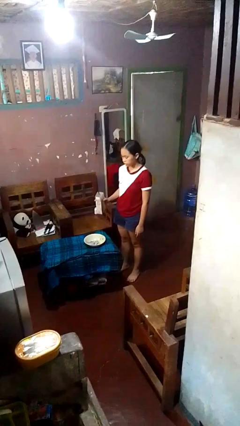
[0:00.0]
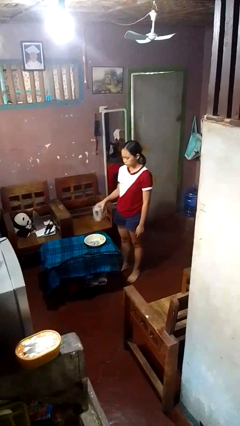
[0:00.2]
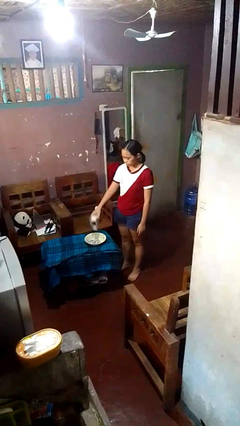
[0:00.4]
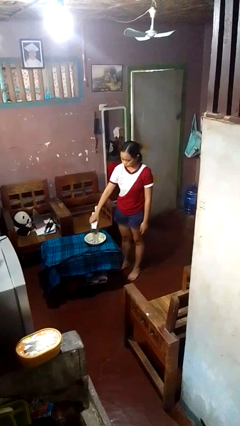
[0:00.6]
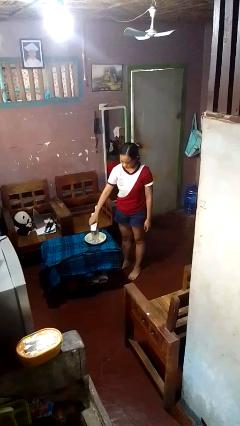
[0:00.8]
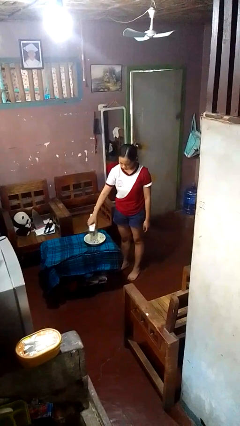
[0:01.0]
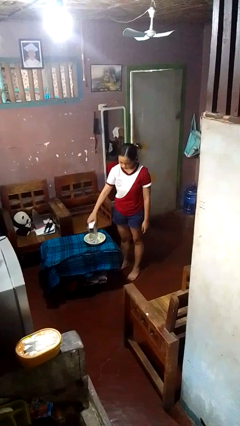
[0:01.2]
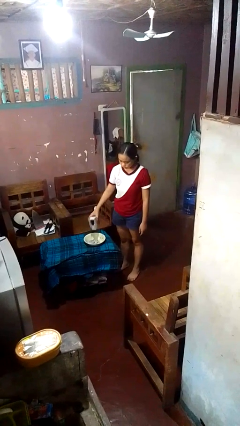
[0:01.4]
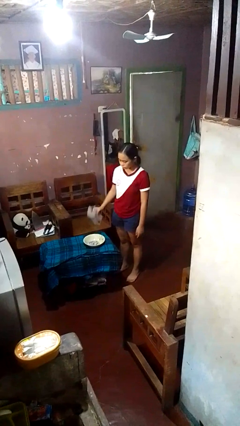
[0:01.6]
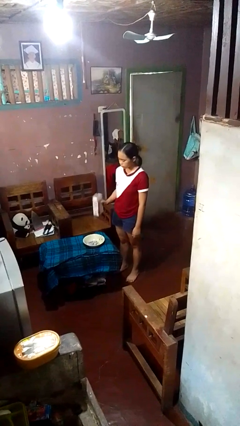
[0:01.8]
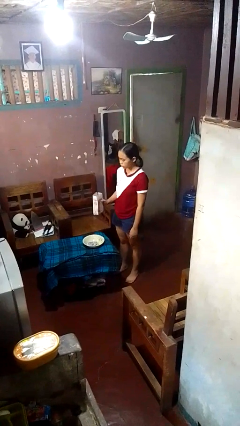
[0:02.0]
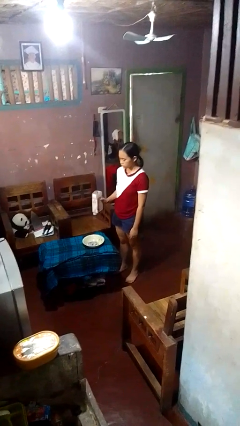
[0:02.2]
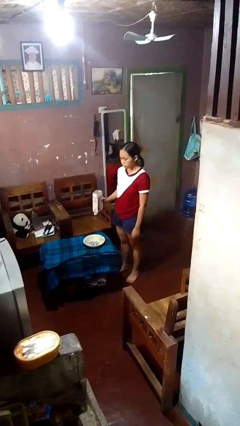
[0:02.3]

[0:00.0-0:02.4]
person pours into bowl

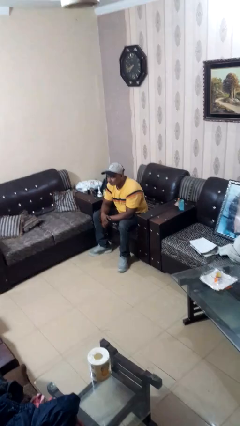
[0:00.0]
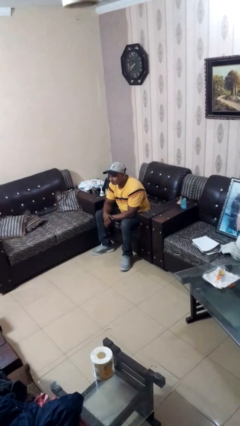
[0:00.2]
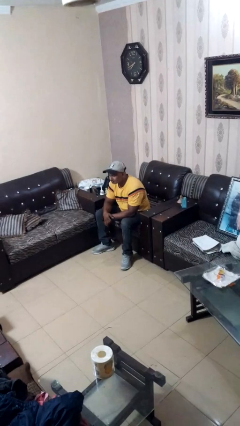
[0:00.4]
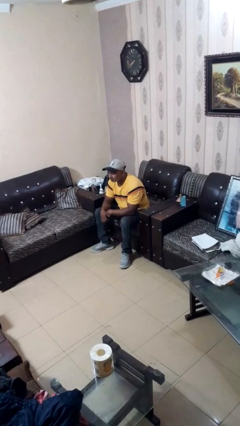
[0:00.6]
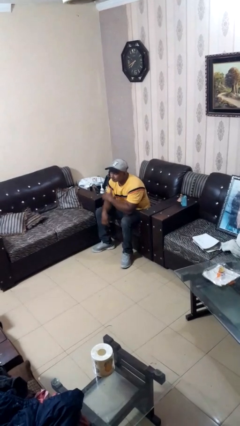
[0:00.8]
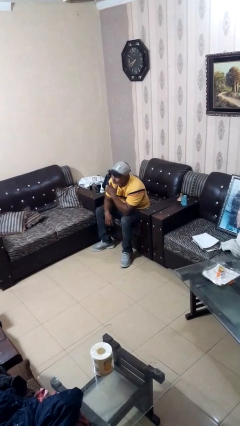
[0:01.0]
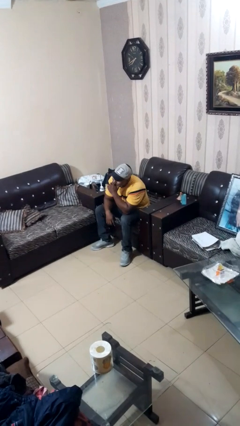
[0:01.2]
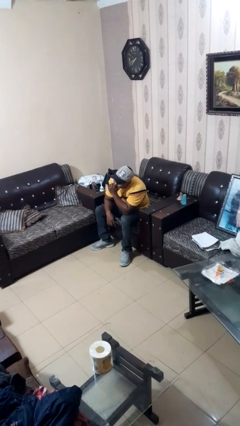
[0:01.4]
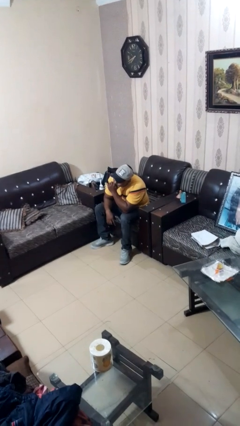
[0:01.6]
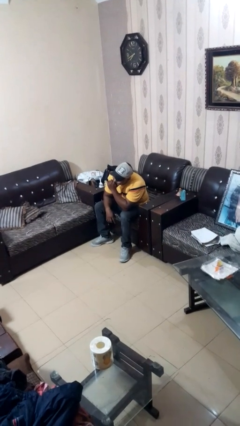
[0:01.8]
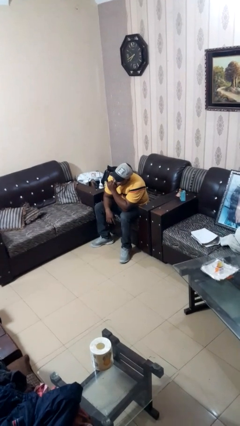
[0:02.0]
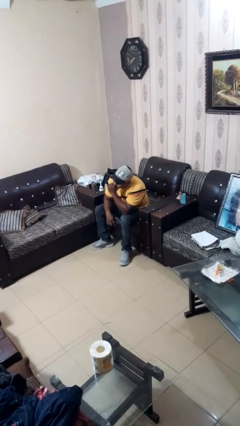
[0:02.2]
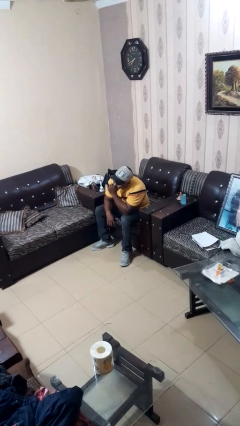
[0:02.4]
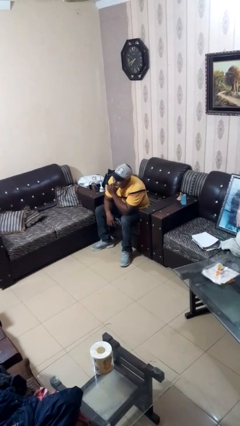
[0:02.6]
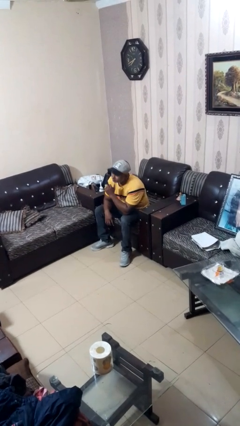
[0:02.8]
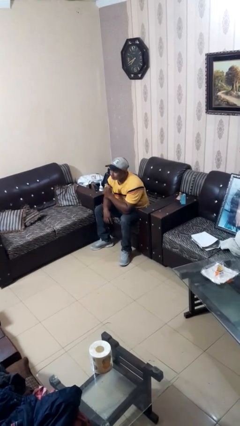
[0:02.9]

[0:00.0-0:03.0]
person strokes chin

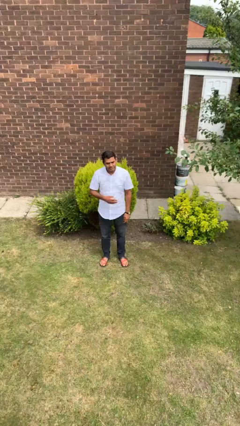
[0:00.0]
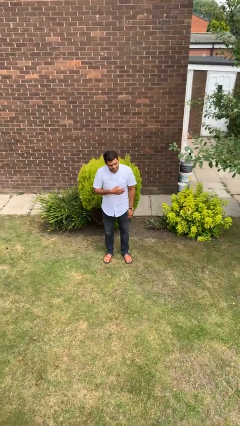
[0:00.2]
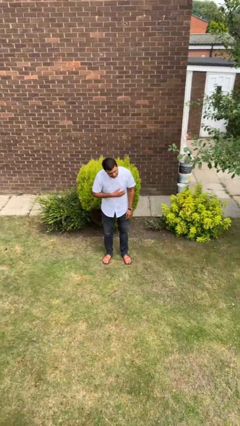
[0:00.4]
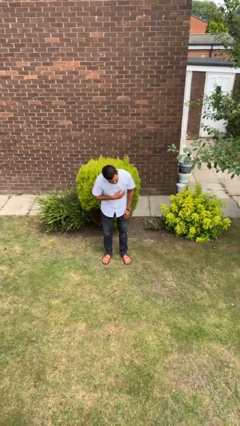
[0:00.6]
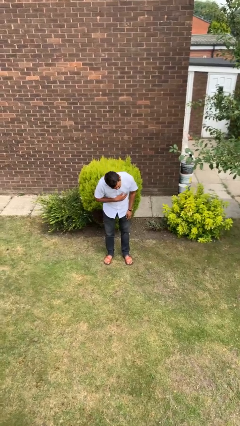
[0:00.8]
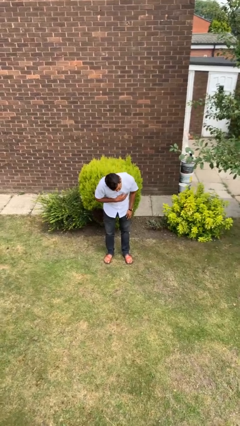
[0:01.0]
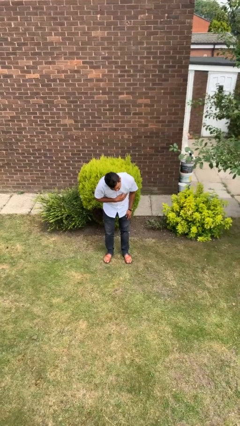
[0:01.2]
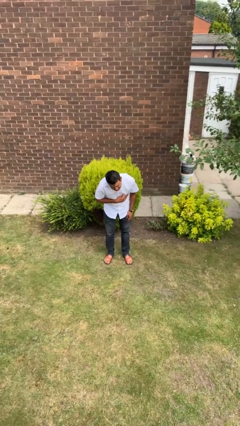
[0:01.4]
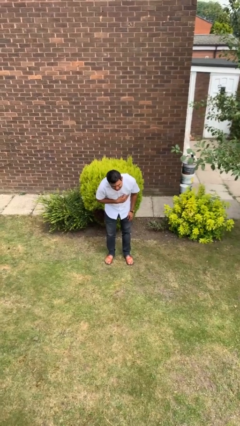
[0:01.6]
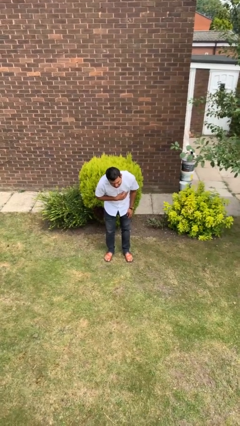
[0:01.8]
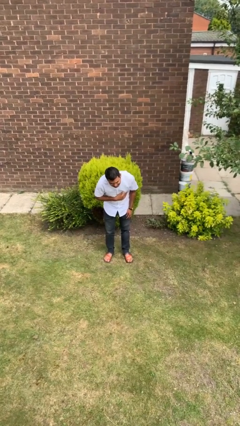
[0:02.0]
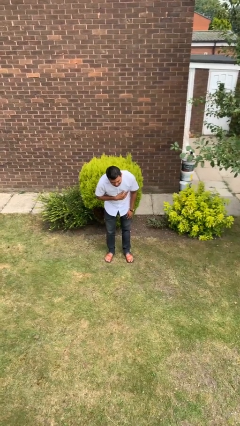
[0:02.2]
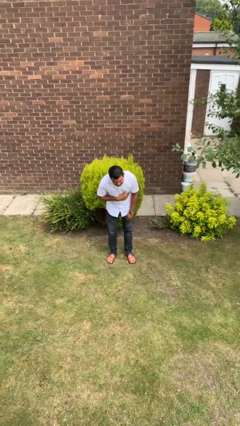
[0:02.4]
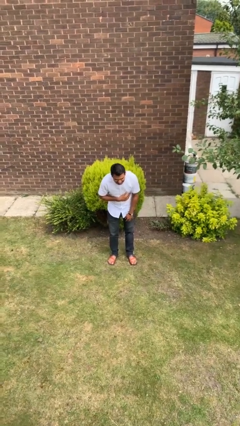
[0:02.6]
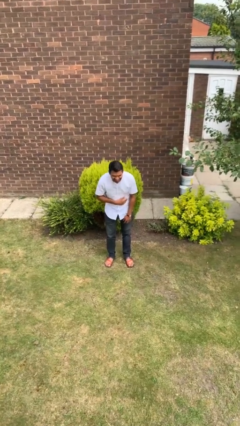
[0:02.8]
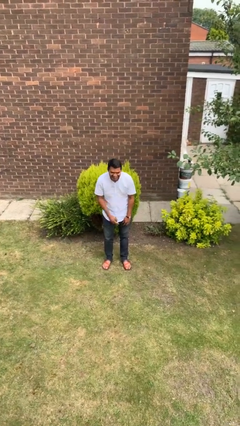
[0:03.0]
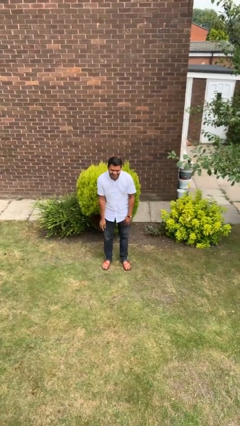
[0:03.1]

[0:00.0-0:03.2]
person bows

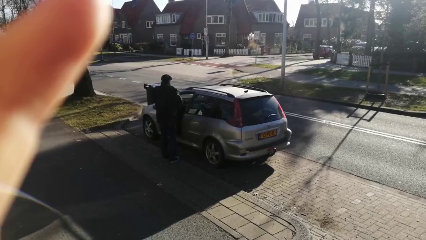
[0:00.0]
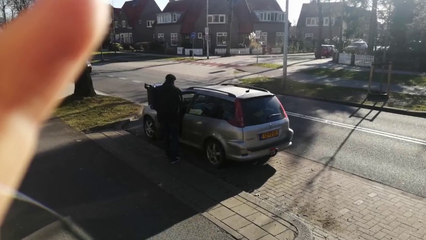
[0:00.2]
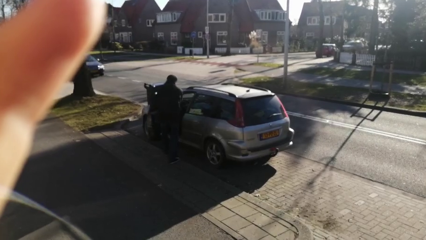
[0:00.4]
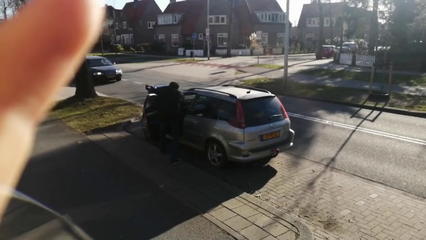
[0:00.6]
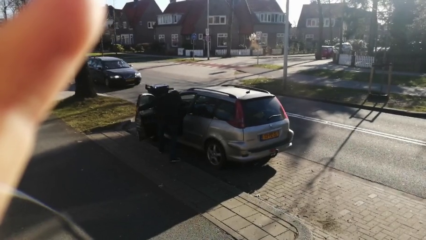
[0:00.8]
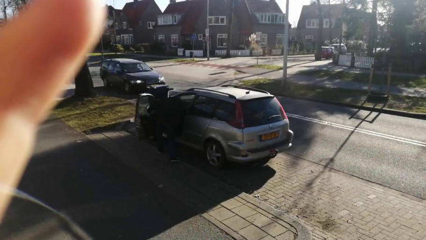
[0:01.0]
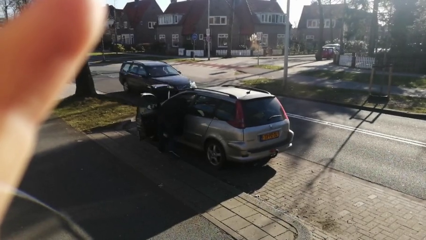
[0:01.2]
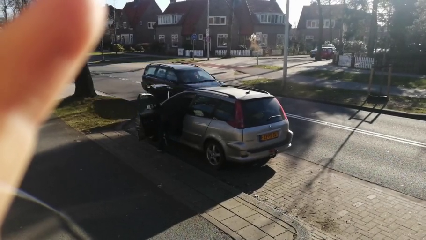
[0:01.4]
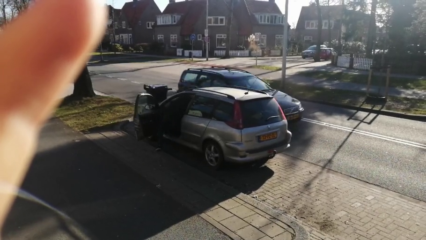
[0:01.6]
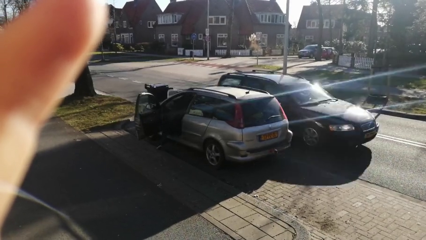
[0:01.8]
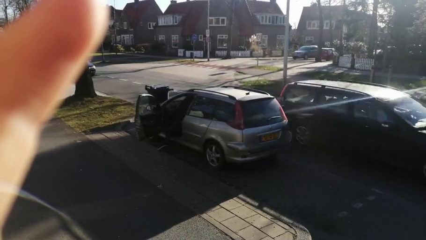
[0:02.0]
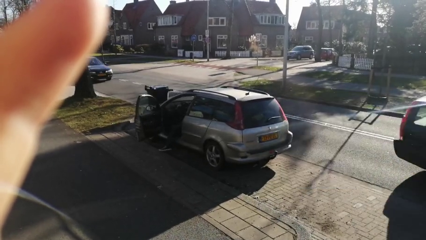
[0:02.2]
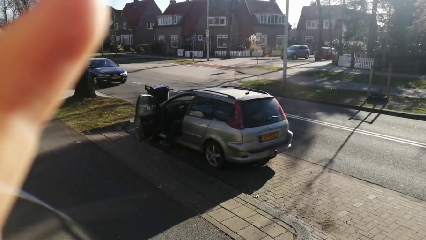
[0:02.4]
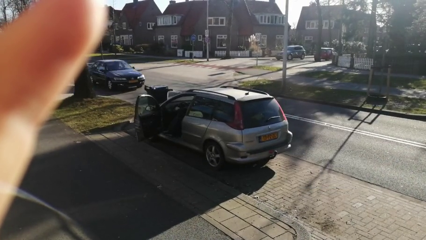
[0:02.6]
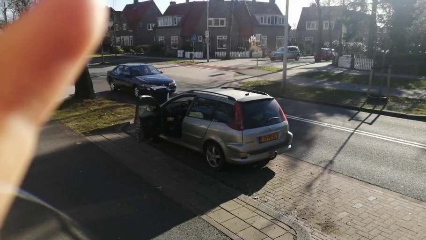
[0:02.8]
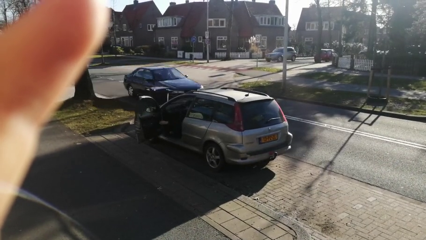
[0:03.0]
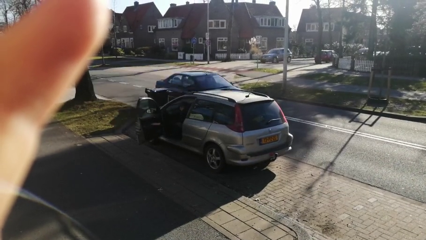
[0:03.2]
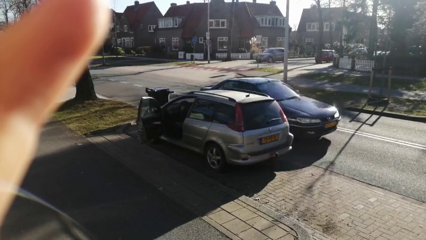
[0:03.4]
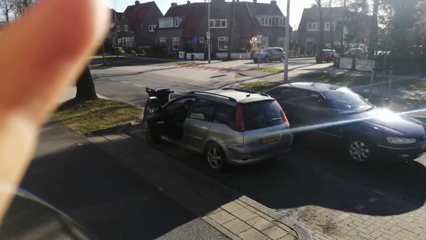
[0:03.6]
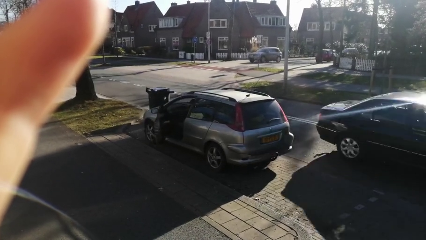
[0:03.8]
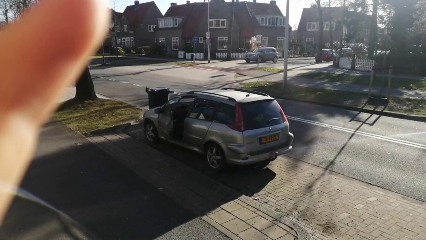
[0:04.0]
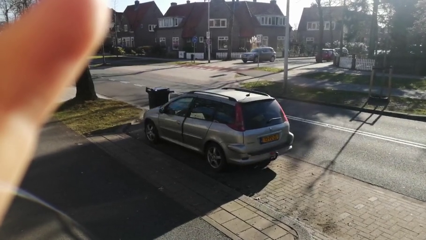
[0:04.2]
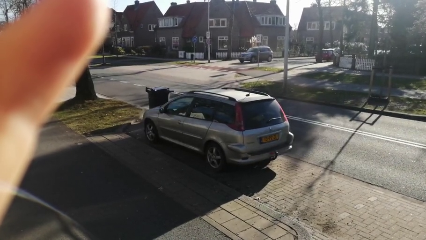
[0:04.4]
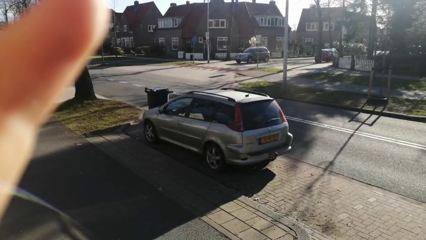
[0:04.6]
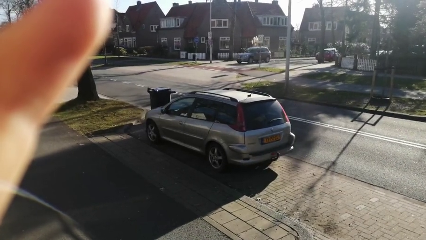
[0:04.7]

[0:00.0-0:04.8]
car picks up person

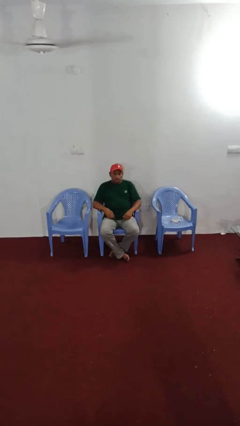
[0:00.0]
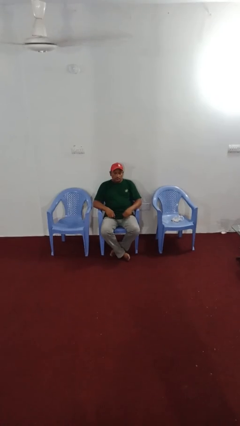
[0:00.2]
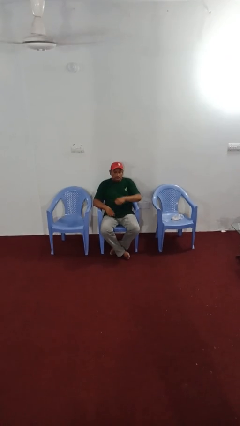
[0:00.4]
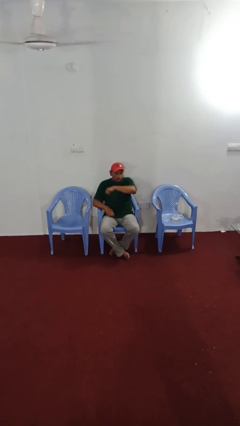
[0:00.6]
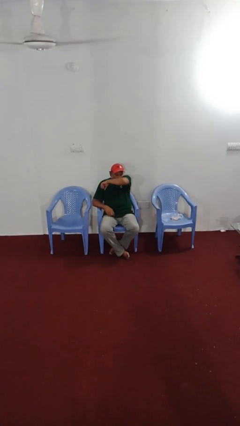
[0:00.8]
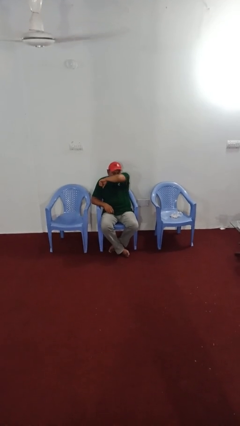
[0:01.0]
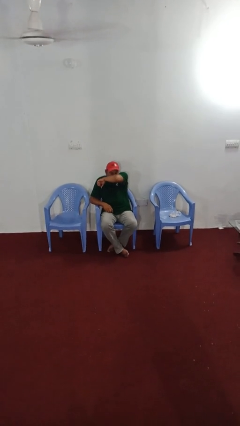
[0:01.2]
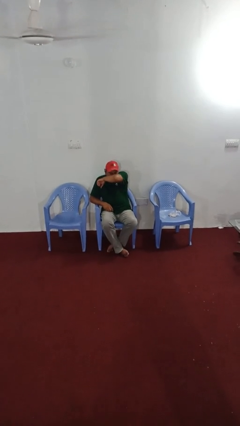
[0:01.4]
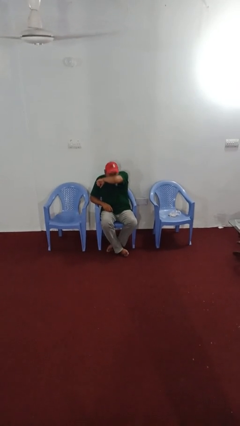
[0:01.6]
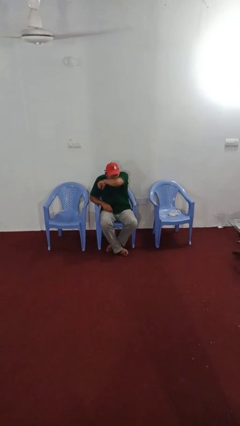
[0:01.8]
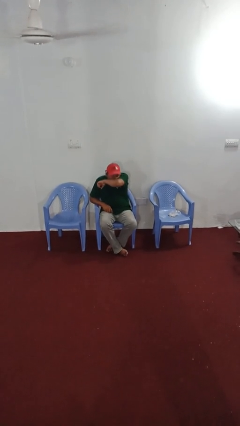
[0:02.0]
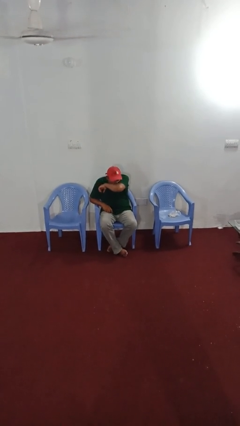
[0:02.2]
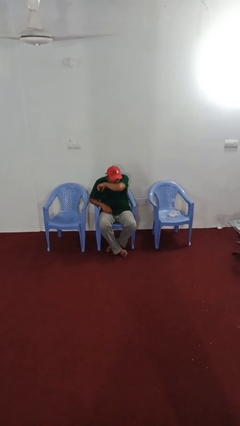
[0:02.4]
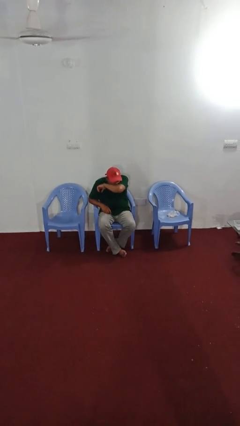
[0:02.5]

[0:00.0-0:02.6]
person sneezes into arm

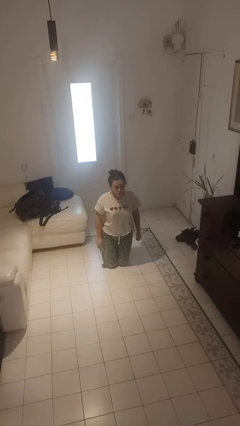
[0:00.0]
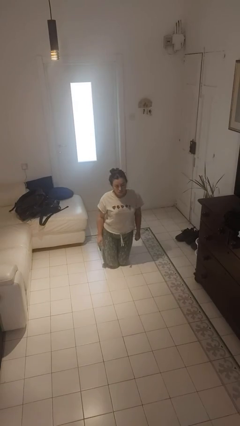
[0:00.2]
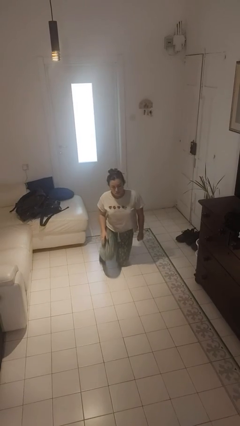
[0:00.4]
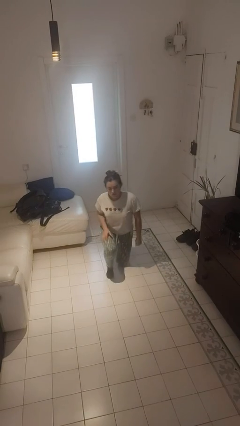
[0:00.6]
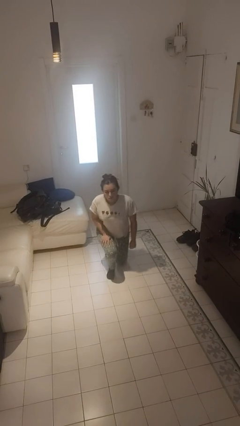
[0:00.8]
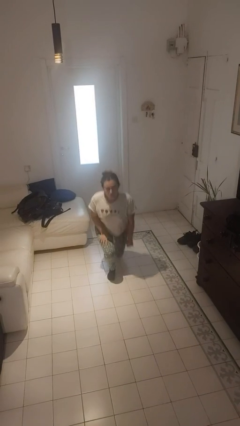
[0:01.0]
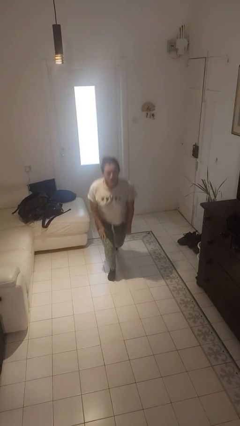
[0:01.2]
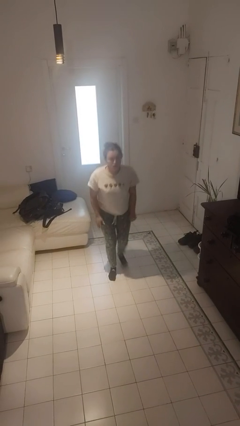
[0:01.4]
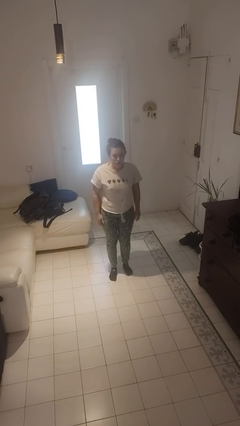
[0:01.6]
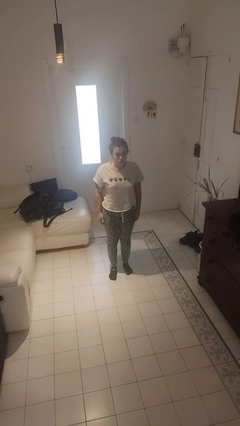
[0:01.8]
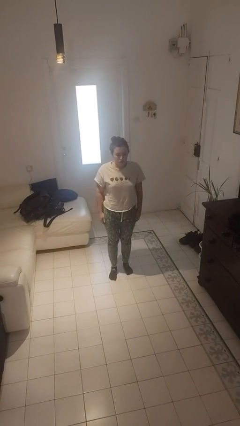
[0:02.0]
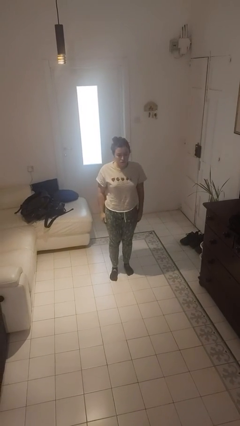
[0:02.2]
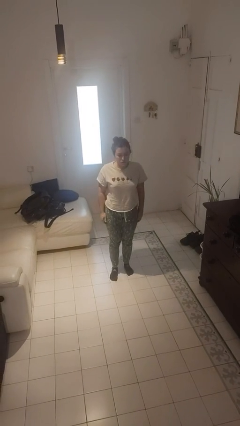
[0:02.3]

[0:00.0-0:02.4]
person stands up from floor
